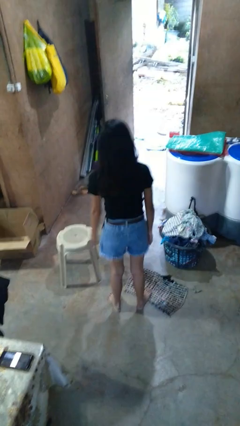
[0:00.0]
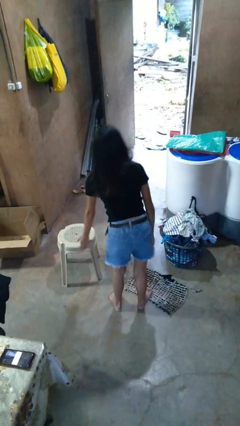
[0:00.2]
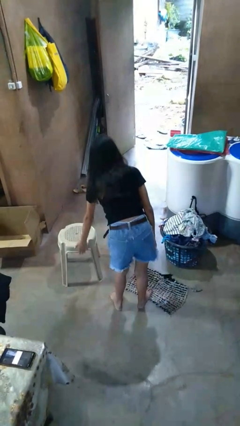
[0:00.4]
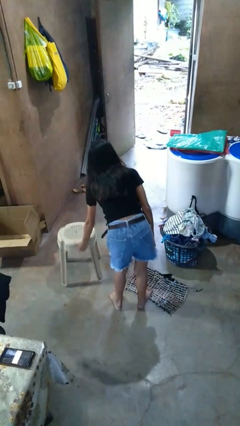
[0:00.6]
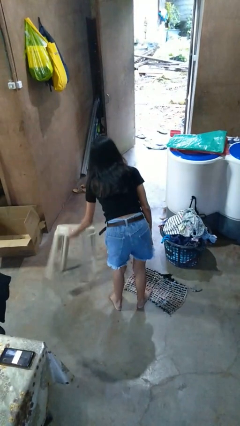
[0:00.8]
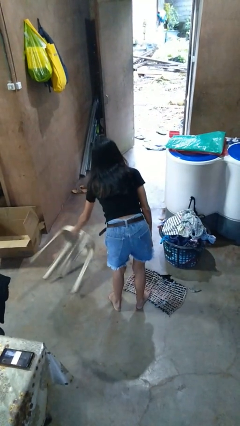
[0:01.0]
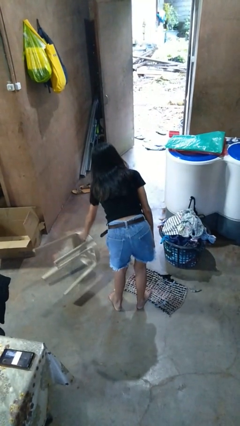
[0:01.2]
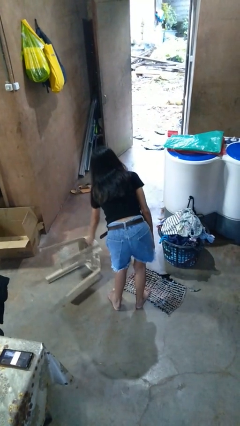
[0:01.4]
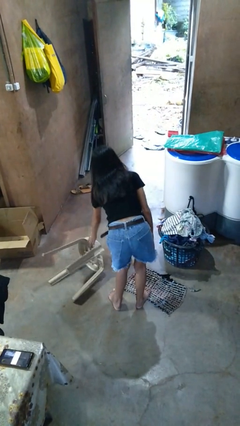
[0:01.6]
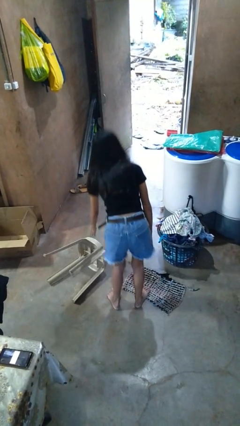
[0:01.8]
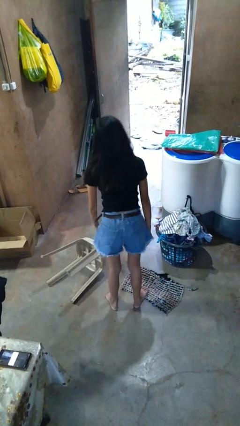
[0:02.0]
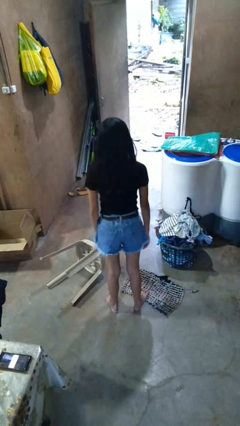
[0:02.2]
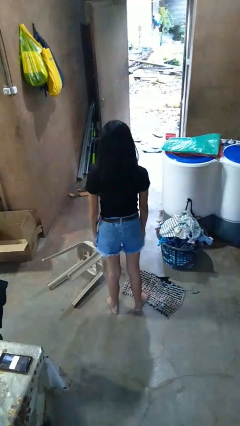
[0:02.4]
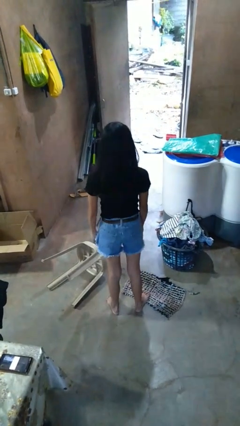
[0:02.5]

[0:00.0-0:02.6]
person knocks over furniture

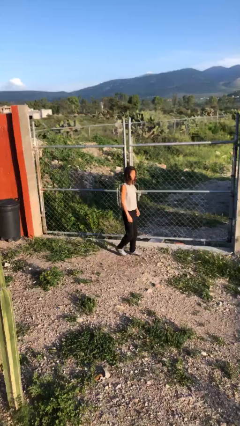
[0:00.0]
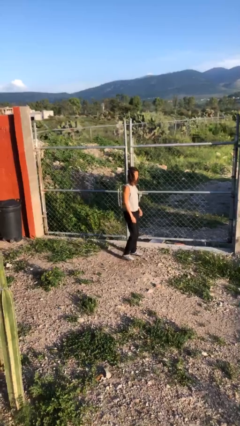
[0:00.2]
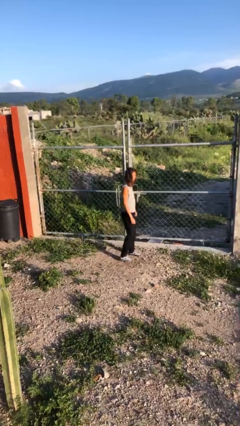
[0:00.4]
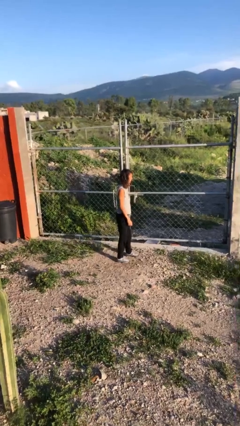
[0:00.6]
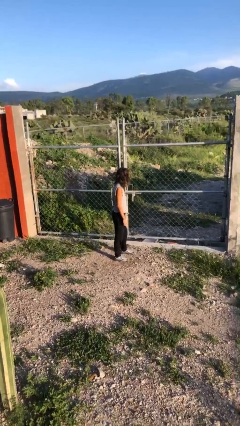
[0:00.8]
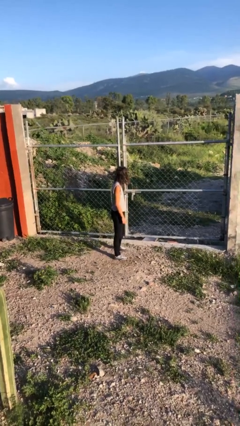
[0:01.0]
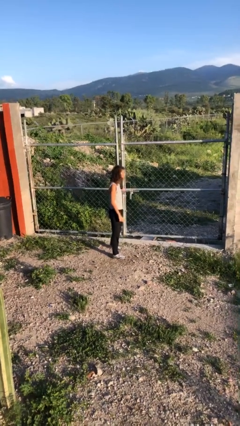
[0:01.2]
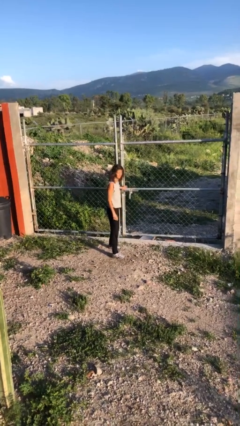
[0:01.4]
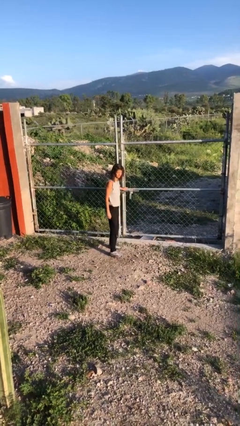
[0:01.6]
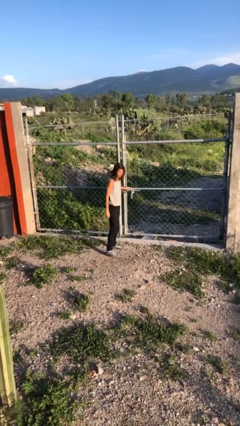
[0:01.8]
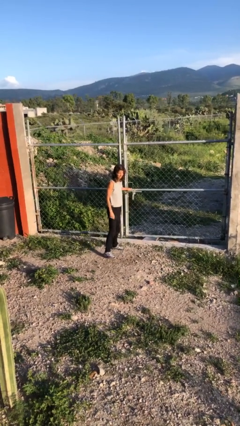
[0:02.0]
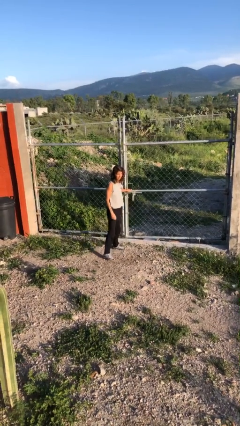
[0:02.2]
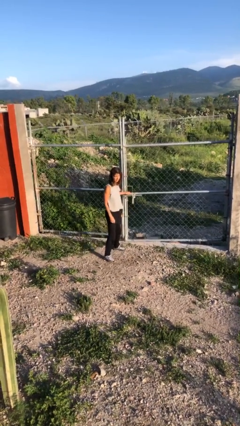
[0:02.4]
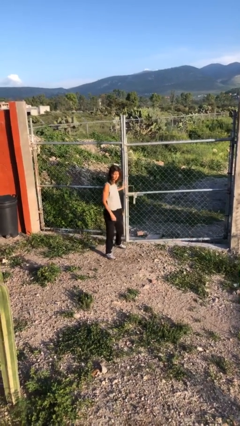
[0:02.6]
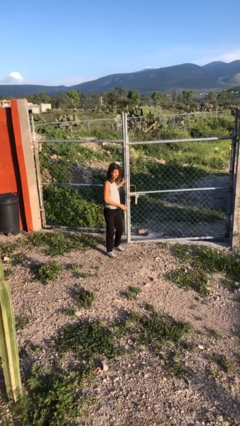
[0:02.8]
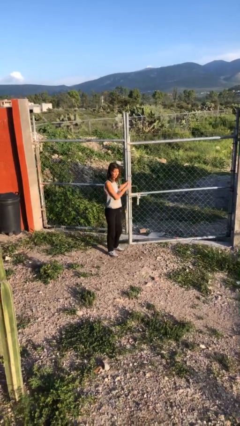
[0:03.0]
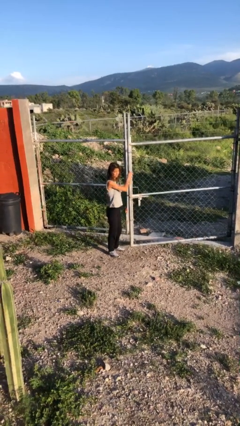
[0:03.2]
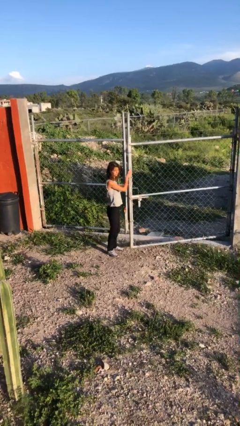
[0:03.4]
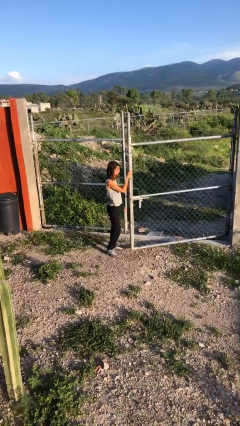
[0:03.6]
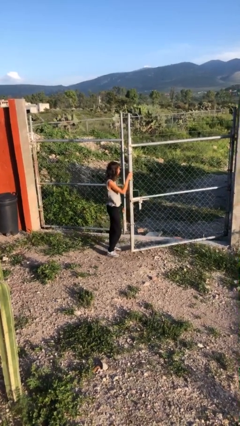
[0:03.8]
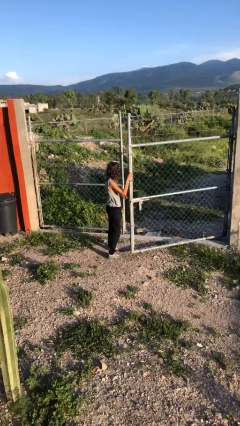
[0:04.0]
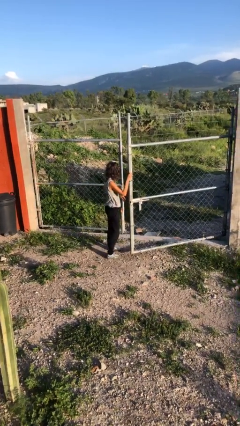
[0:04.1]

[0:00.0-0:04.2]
person opens gate

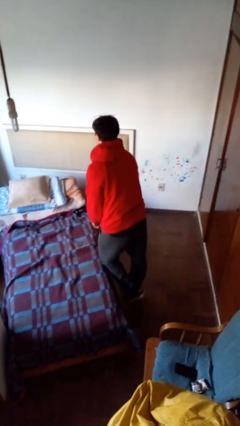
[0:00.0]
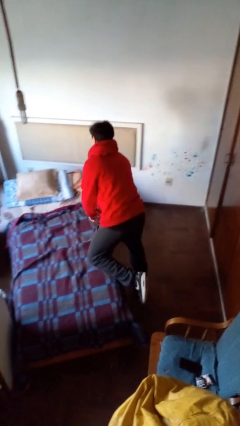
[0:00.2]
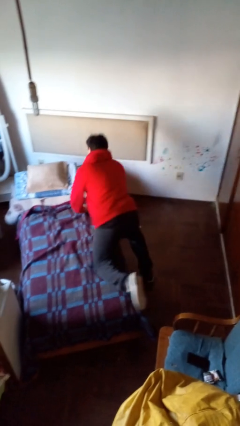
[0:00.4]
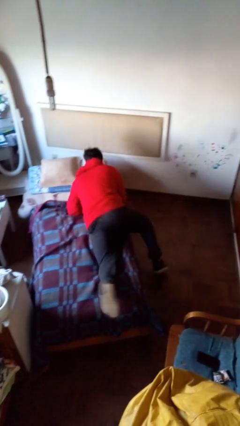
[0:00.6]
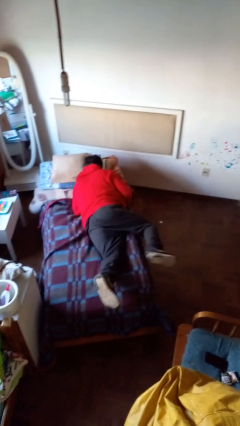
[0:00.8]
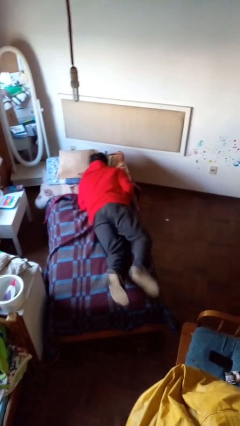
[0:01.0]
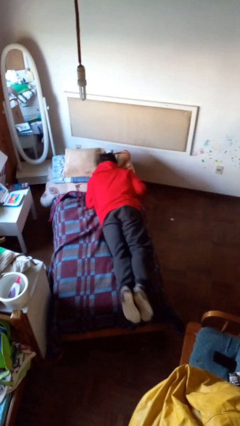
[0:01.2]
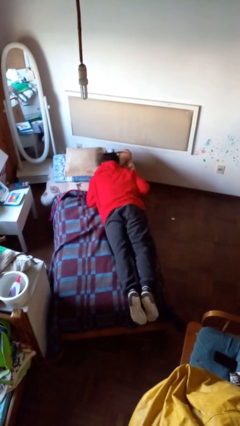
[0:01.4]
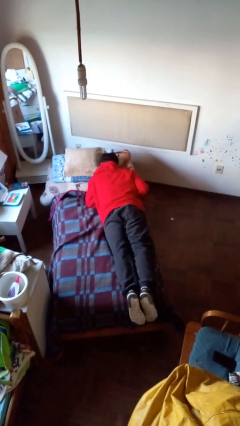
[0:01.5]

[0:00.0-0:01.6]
person lies down on bed

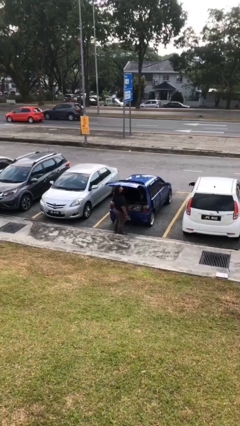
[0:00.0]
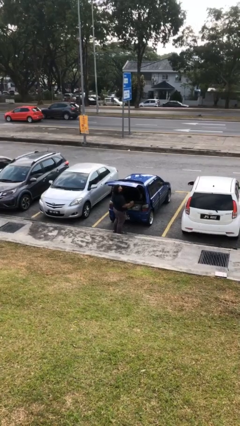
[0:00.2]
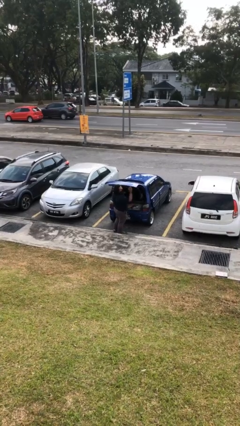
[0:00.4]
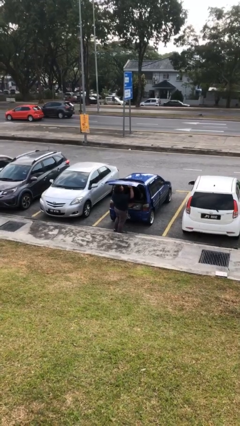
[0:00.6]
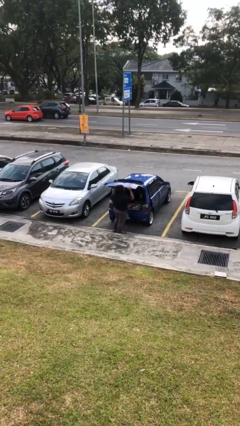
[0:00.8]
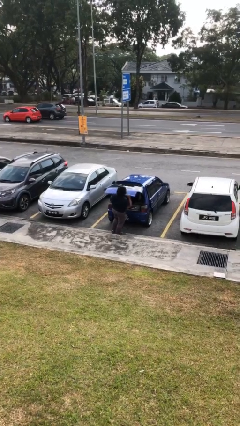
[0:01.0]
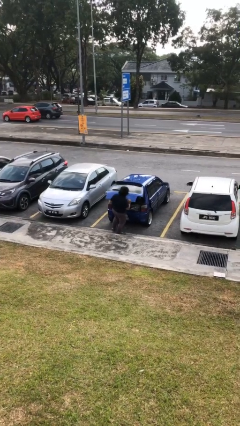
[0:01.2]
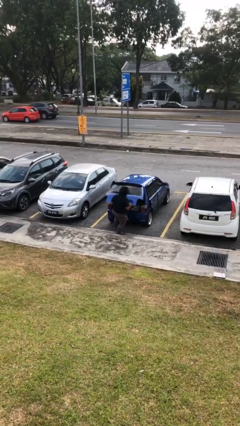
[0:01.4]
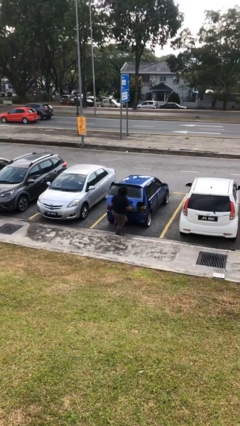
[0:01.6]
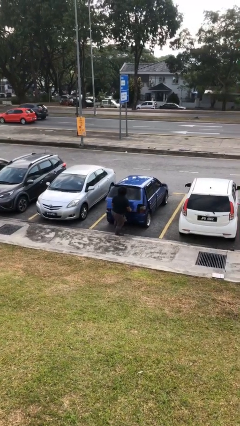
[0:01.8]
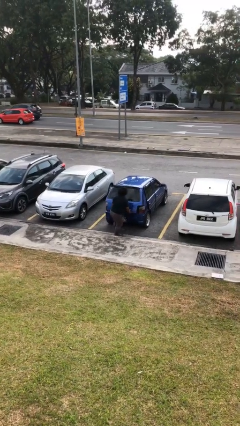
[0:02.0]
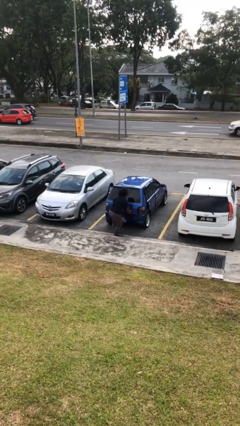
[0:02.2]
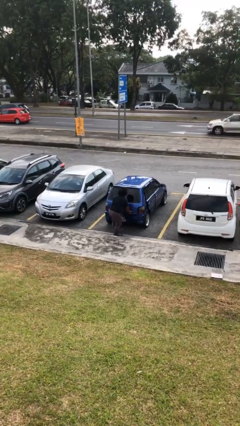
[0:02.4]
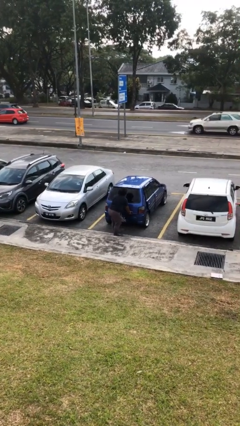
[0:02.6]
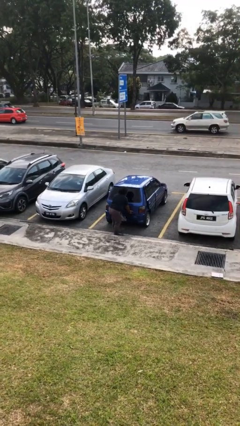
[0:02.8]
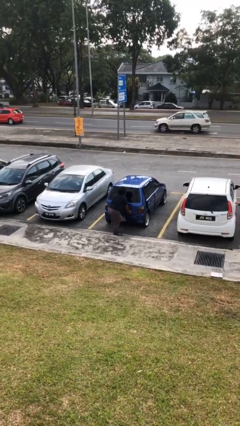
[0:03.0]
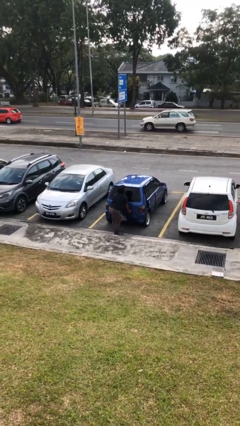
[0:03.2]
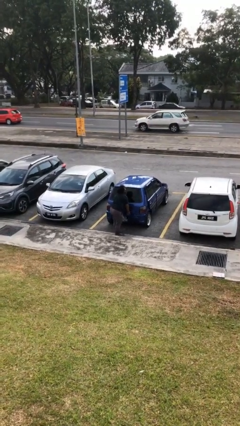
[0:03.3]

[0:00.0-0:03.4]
person closes car trunk

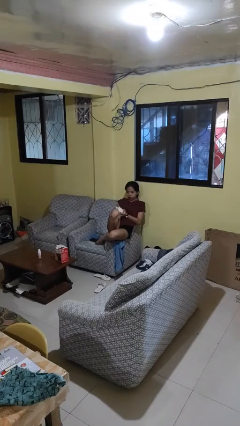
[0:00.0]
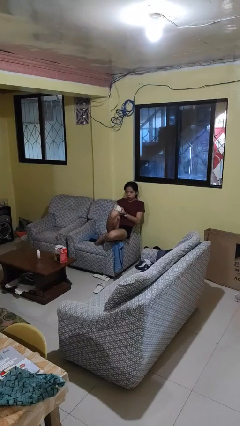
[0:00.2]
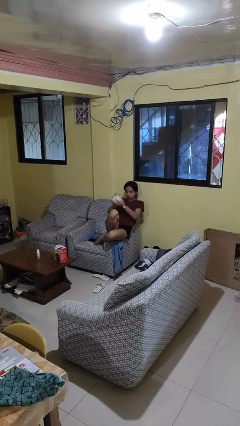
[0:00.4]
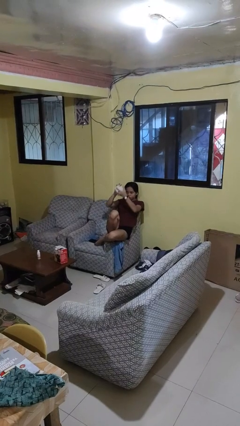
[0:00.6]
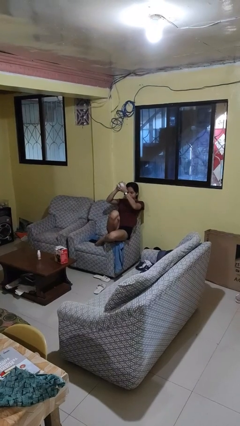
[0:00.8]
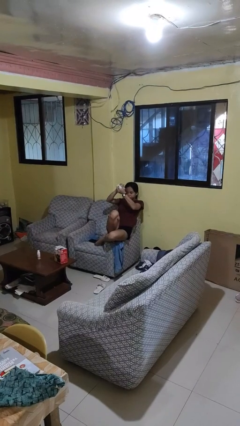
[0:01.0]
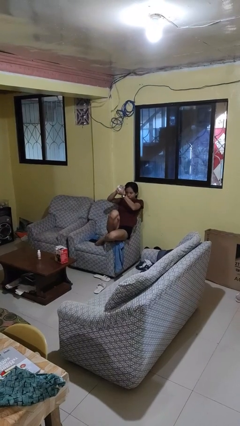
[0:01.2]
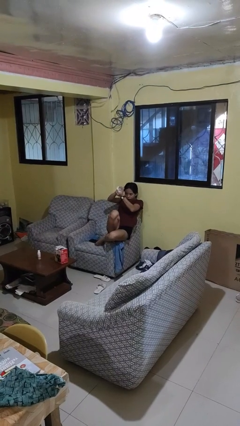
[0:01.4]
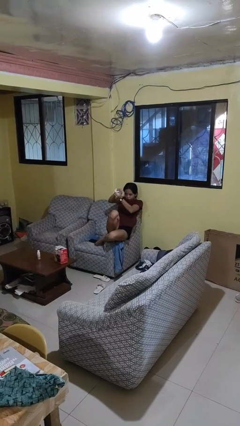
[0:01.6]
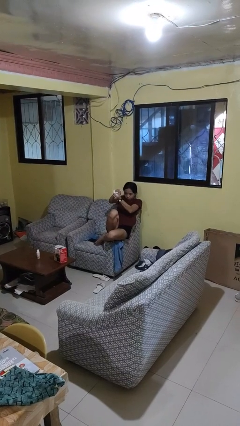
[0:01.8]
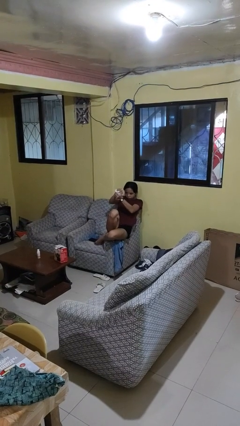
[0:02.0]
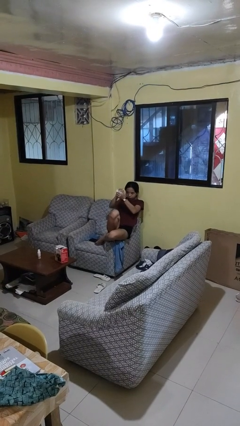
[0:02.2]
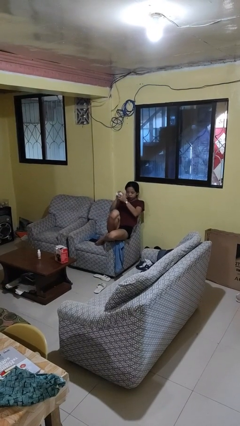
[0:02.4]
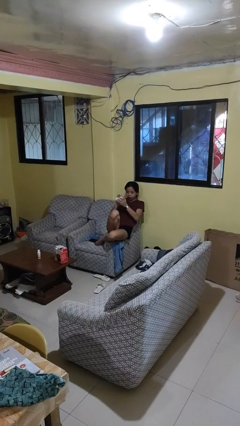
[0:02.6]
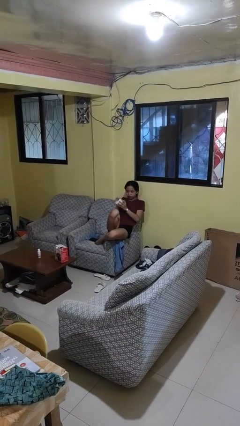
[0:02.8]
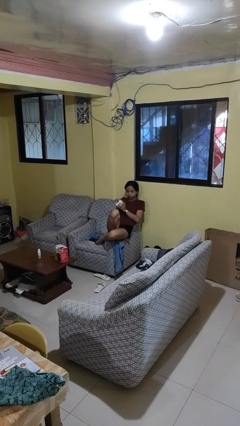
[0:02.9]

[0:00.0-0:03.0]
person squeezes object

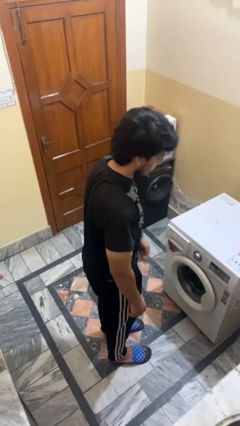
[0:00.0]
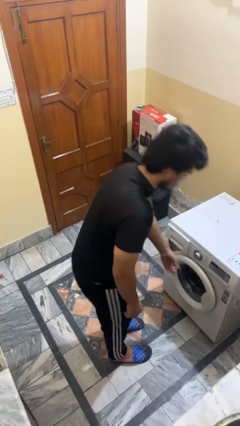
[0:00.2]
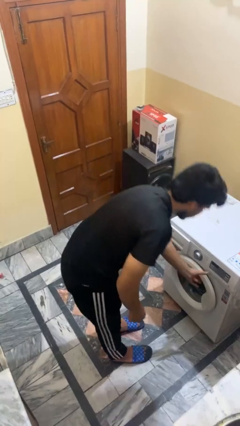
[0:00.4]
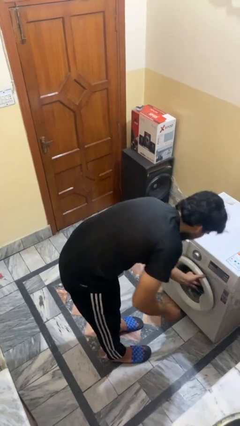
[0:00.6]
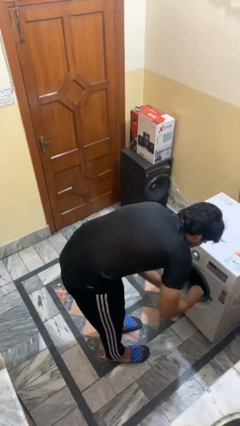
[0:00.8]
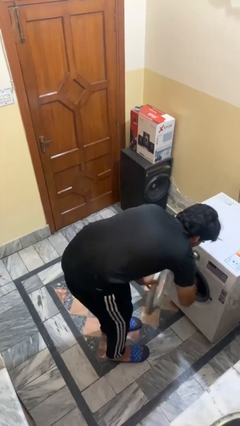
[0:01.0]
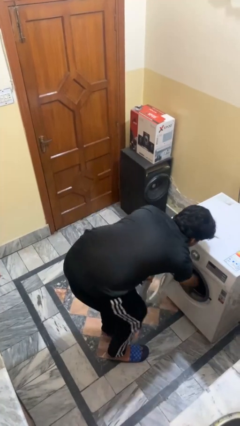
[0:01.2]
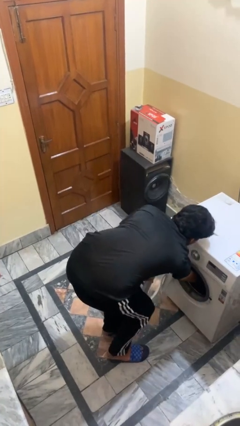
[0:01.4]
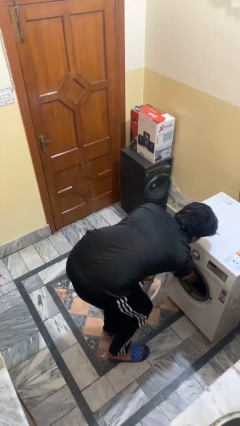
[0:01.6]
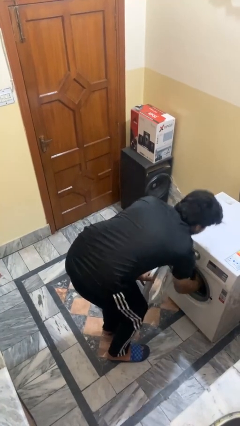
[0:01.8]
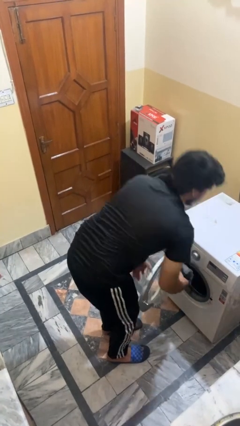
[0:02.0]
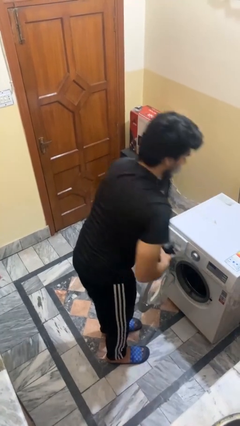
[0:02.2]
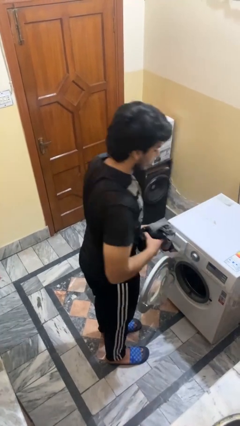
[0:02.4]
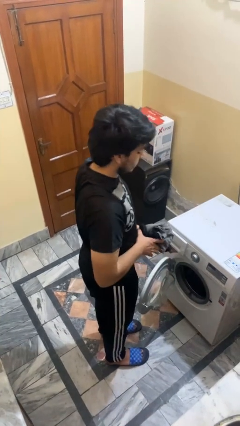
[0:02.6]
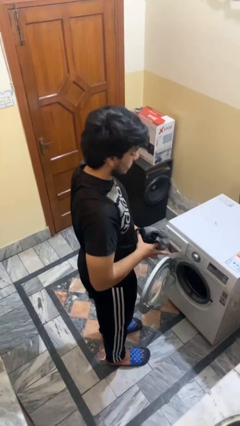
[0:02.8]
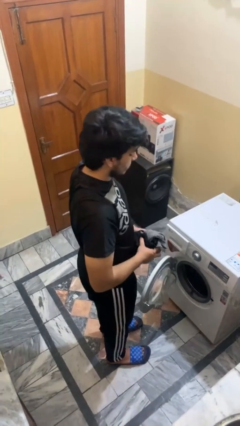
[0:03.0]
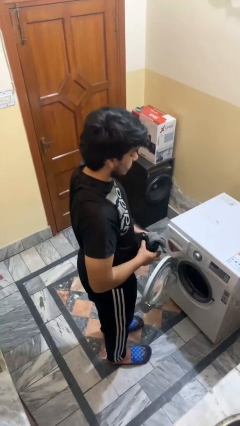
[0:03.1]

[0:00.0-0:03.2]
person unloads dryer
